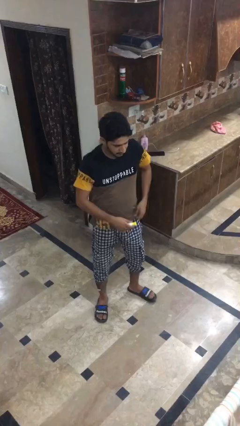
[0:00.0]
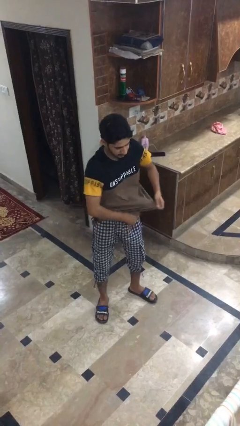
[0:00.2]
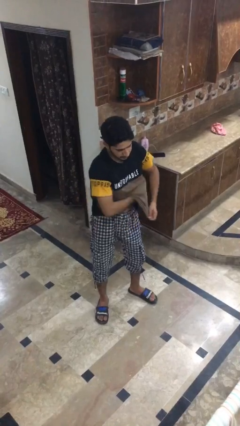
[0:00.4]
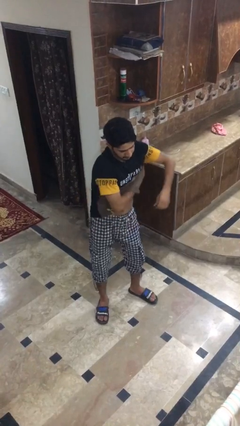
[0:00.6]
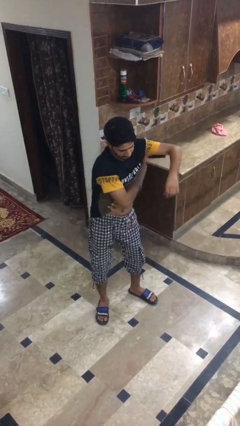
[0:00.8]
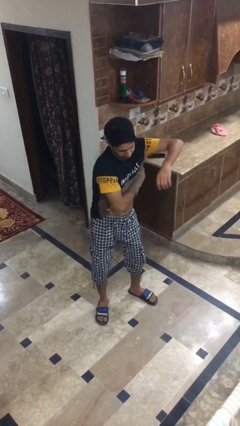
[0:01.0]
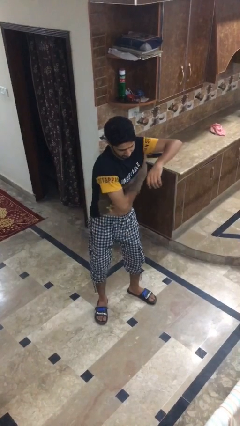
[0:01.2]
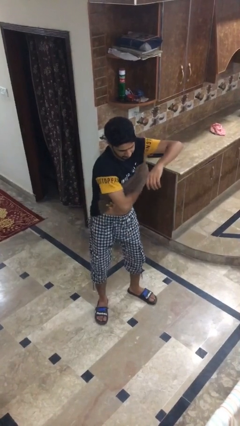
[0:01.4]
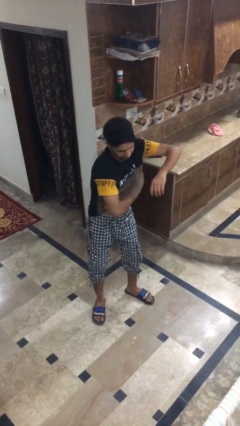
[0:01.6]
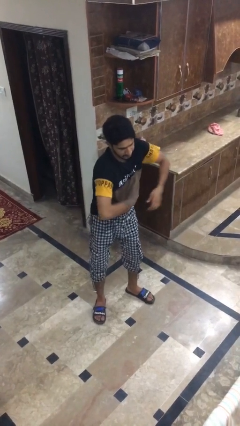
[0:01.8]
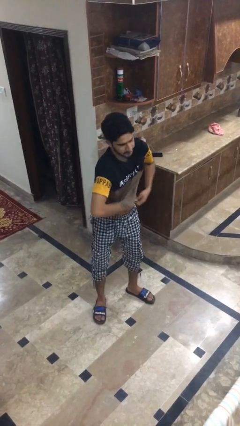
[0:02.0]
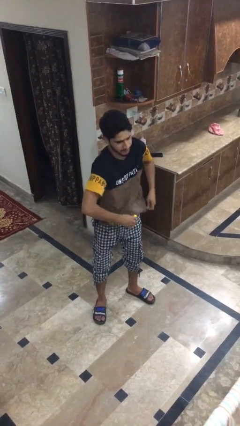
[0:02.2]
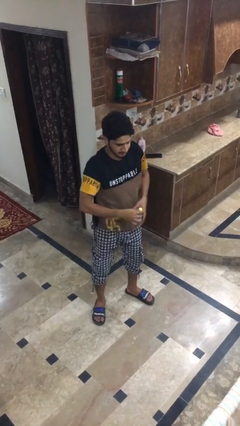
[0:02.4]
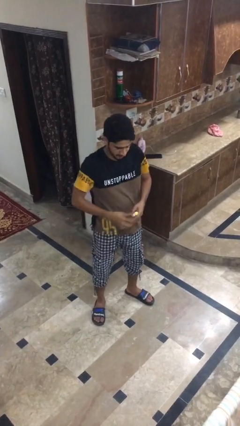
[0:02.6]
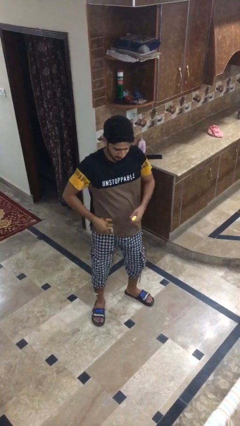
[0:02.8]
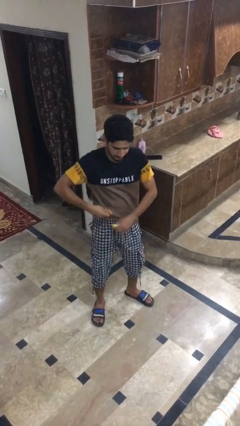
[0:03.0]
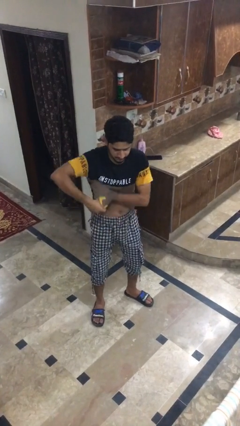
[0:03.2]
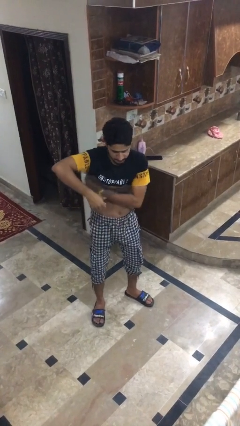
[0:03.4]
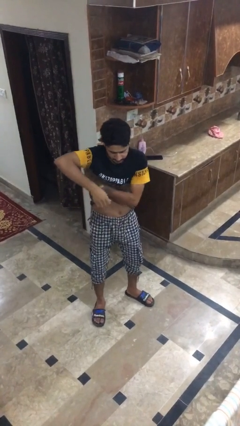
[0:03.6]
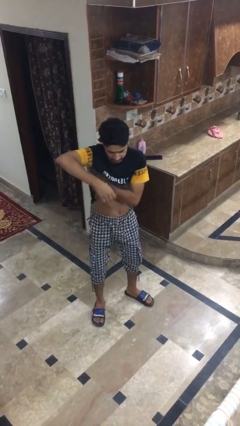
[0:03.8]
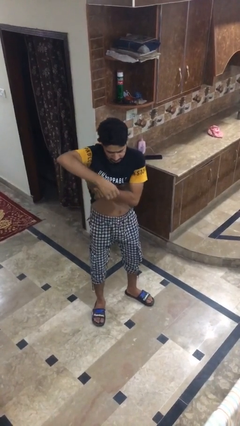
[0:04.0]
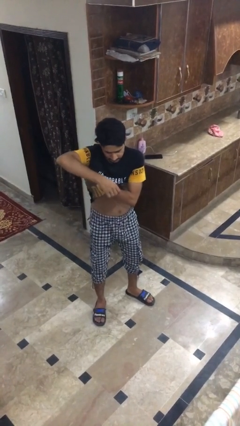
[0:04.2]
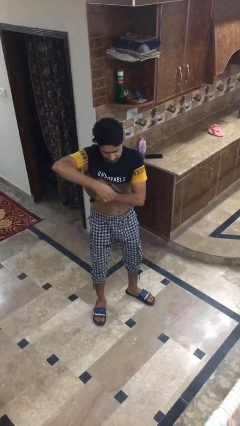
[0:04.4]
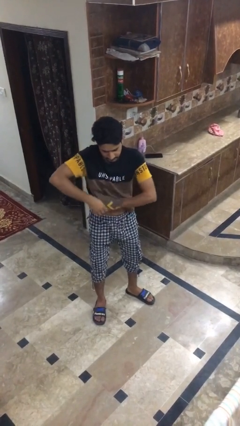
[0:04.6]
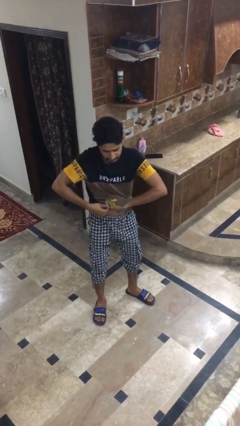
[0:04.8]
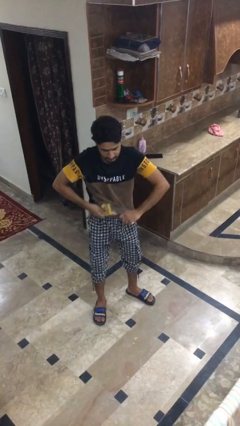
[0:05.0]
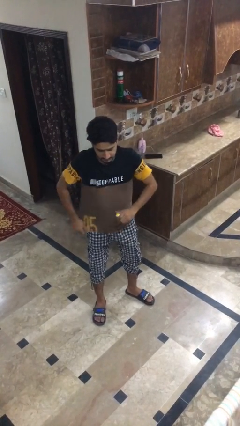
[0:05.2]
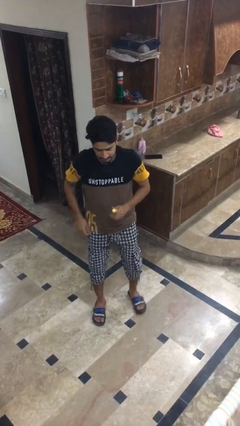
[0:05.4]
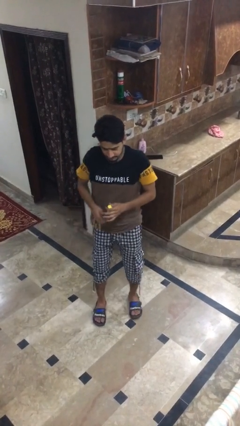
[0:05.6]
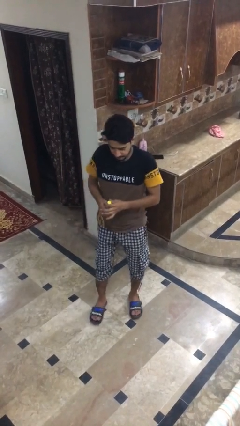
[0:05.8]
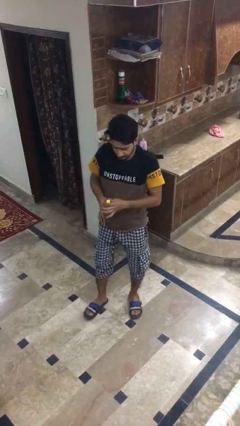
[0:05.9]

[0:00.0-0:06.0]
person applies deodorant

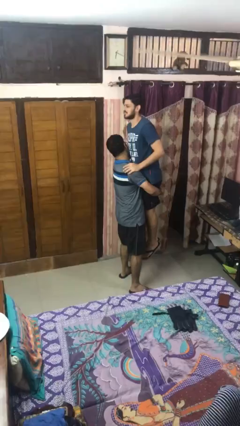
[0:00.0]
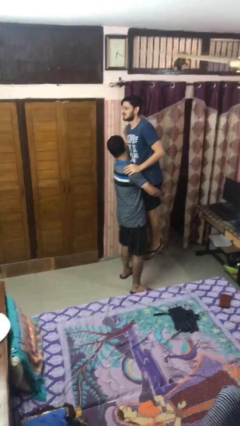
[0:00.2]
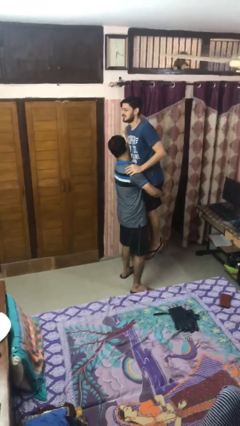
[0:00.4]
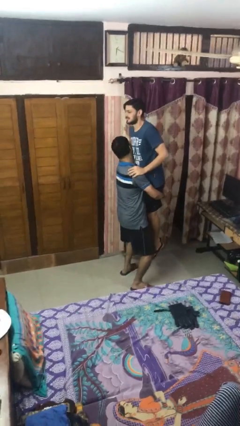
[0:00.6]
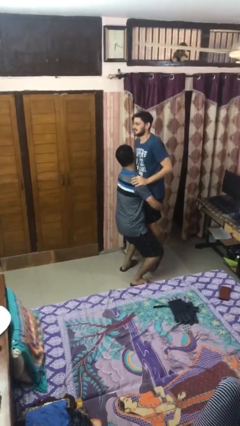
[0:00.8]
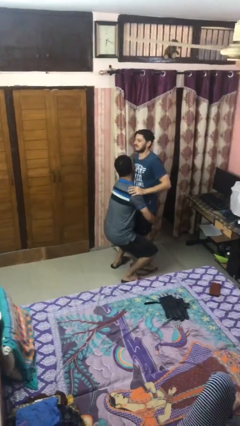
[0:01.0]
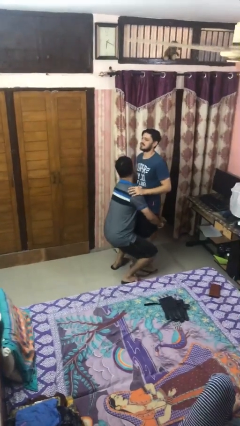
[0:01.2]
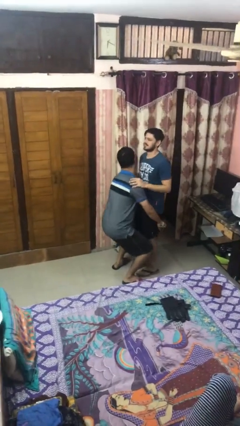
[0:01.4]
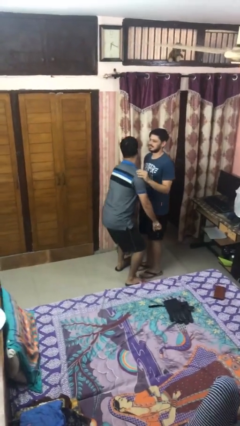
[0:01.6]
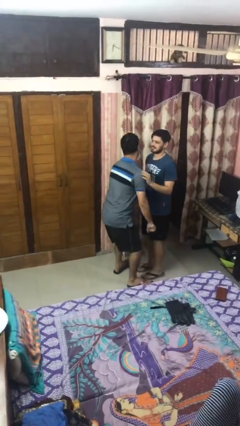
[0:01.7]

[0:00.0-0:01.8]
person puts down person

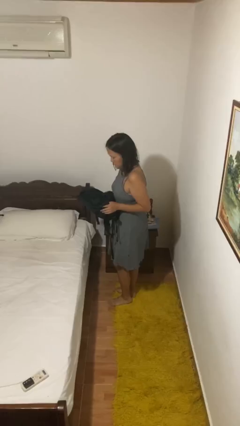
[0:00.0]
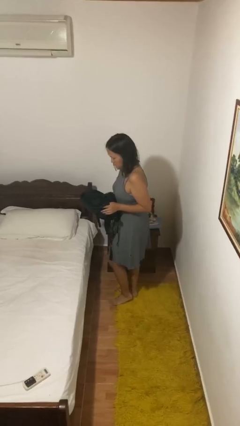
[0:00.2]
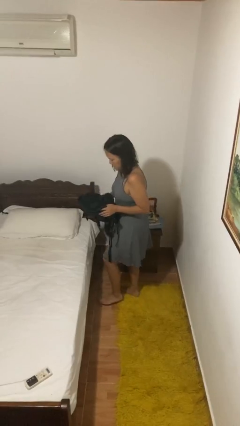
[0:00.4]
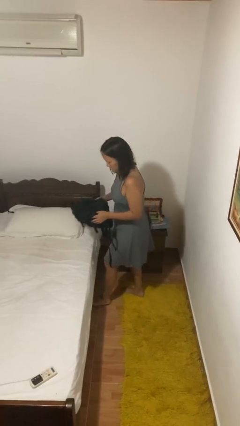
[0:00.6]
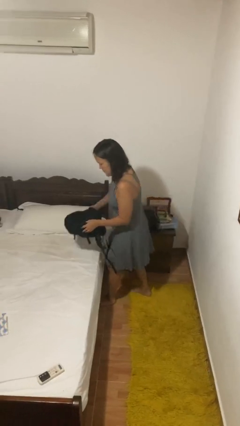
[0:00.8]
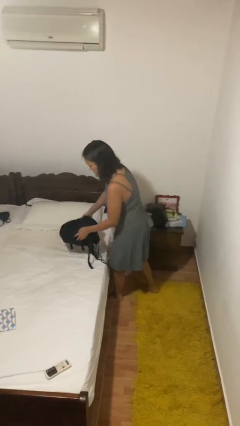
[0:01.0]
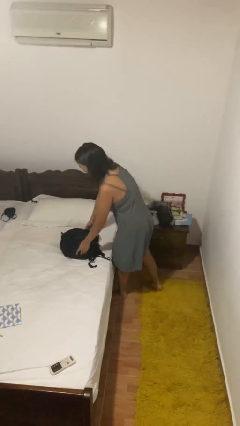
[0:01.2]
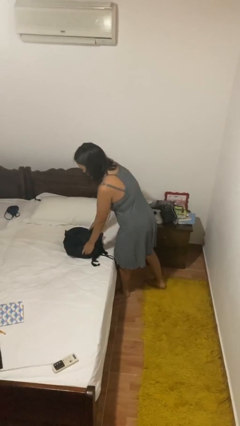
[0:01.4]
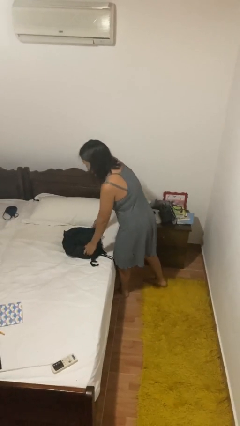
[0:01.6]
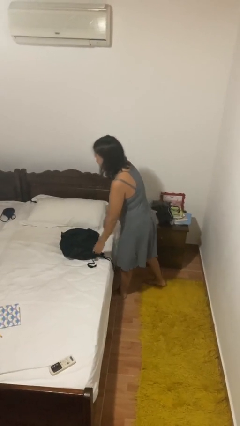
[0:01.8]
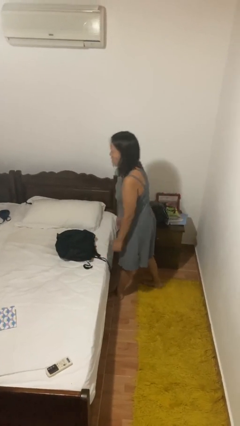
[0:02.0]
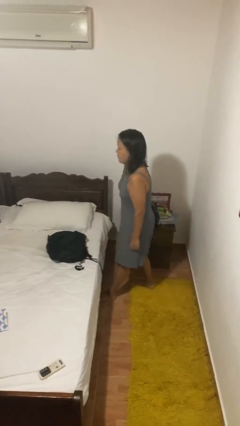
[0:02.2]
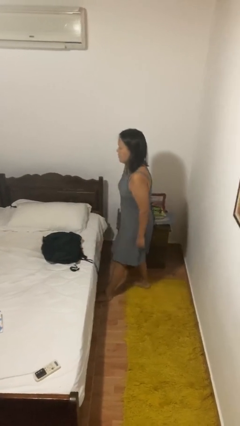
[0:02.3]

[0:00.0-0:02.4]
person puts down object on bed

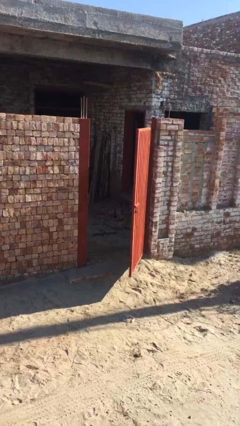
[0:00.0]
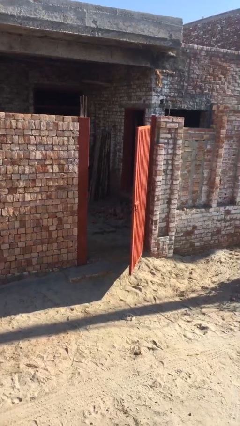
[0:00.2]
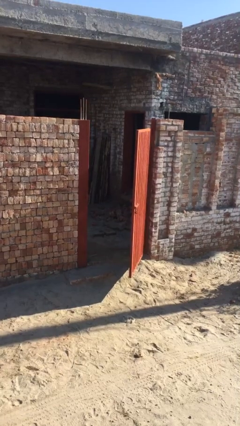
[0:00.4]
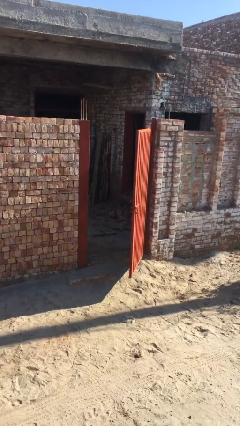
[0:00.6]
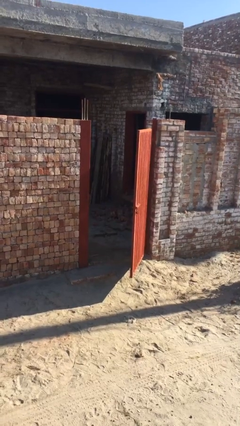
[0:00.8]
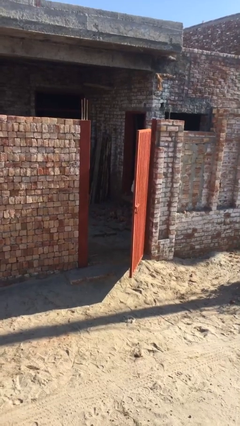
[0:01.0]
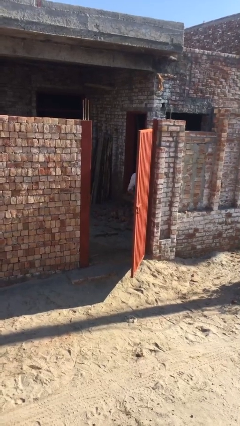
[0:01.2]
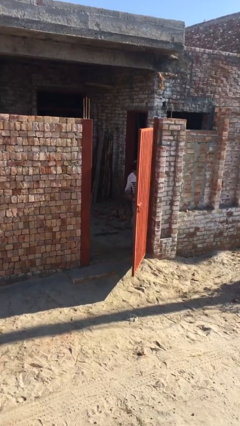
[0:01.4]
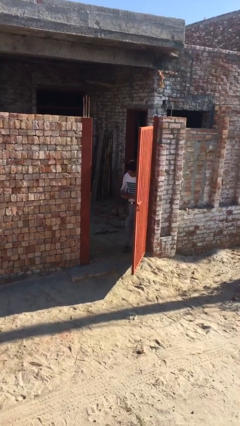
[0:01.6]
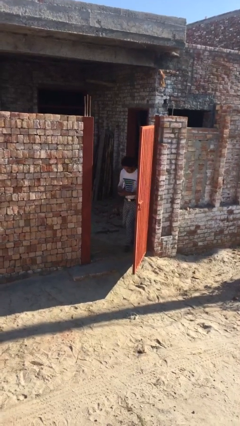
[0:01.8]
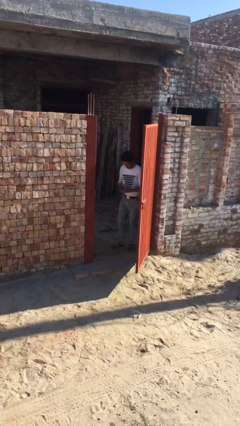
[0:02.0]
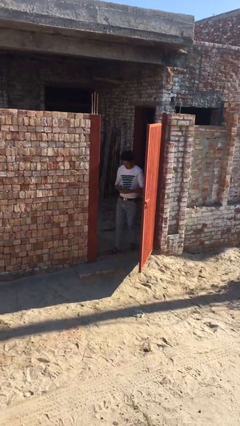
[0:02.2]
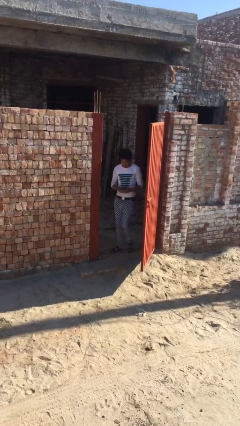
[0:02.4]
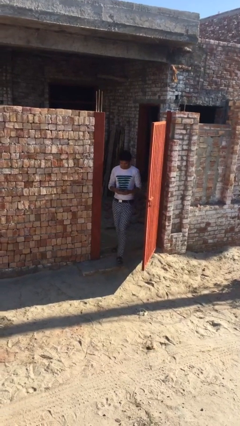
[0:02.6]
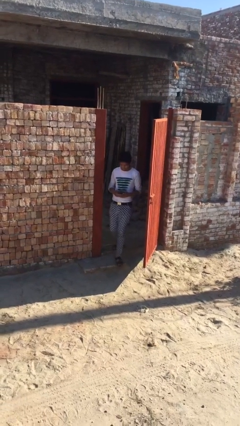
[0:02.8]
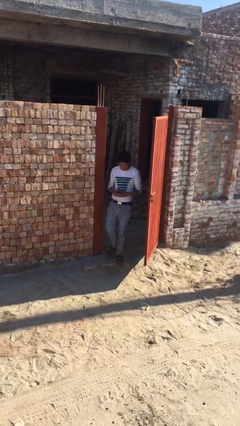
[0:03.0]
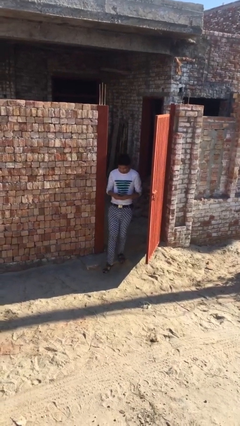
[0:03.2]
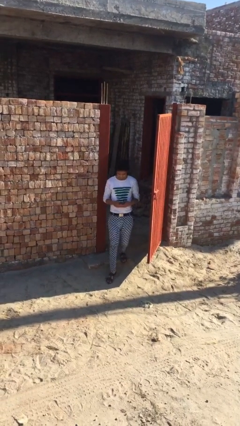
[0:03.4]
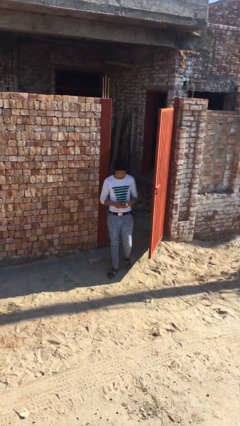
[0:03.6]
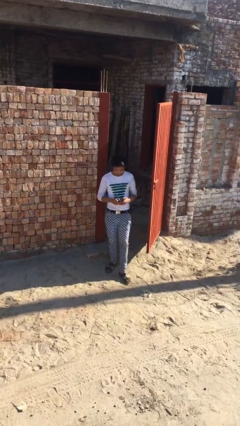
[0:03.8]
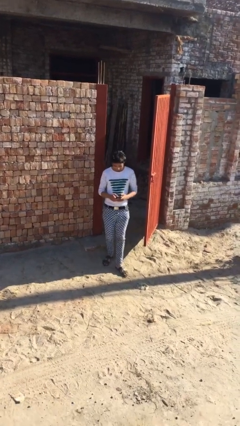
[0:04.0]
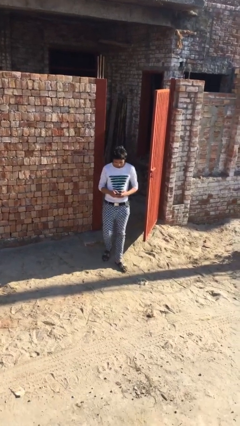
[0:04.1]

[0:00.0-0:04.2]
person enters scene through structure

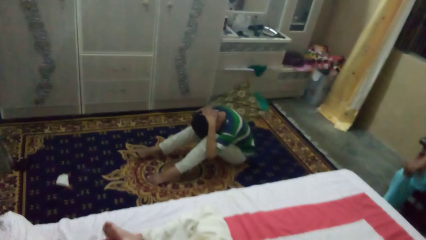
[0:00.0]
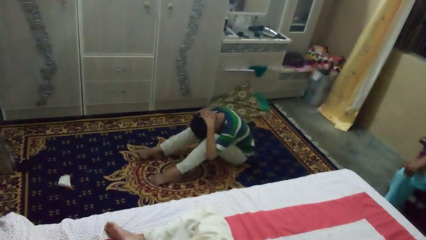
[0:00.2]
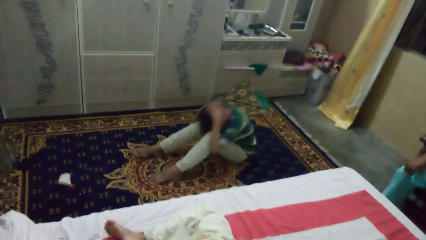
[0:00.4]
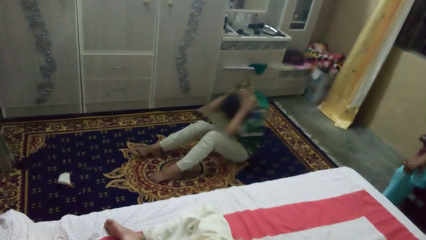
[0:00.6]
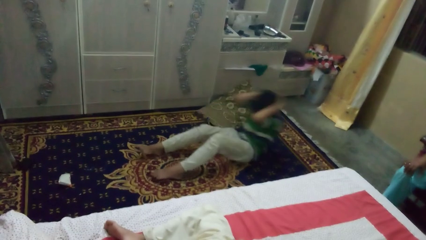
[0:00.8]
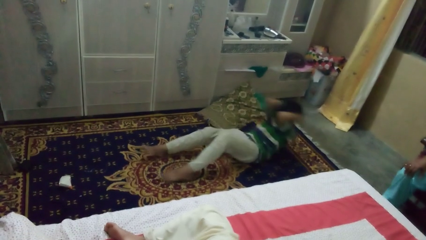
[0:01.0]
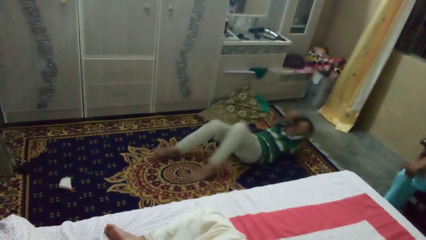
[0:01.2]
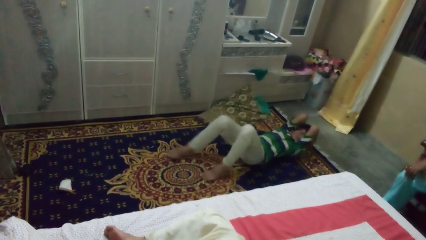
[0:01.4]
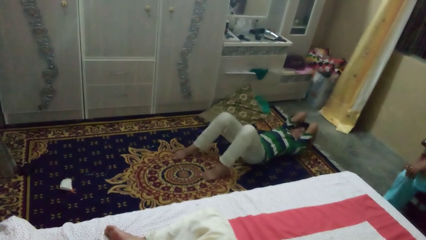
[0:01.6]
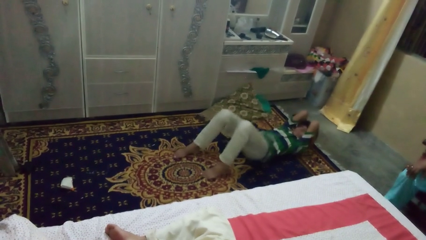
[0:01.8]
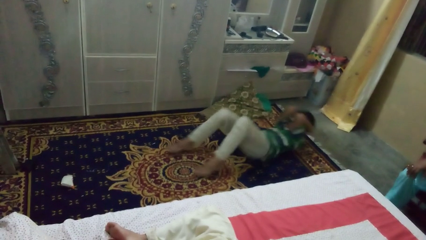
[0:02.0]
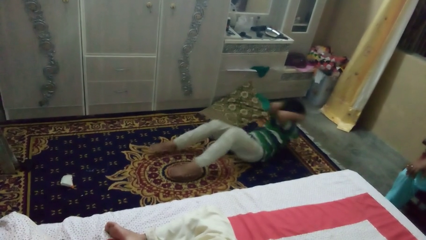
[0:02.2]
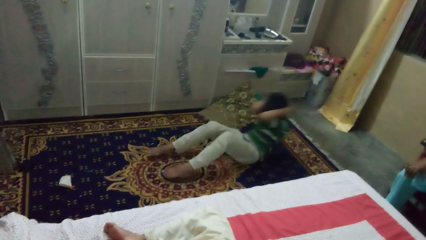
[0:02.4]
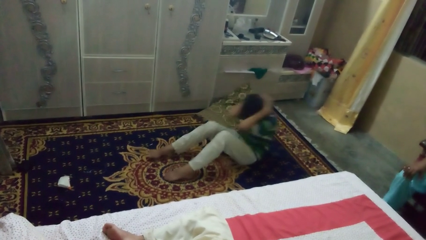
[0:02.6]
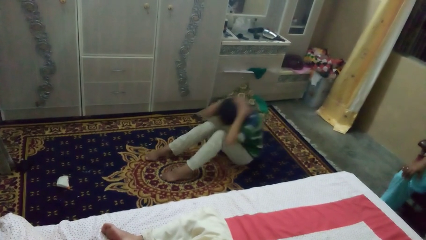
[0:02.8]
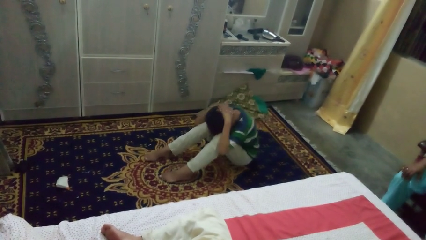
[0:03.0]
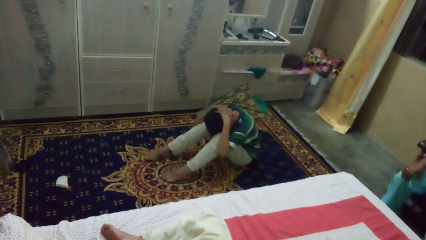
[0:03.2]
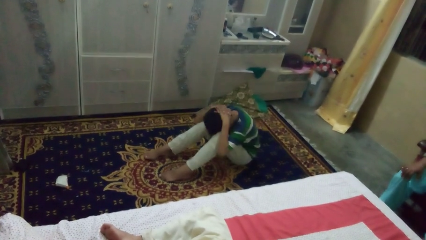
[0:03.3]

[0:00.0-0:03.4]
person exercises with situp
